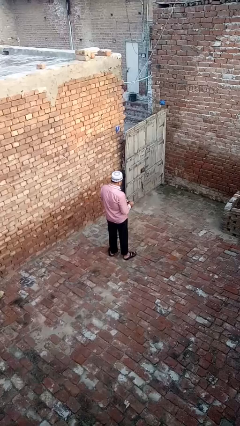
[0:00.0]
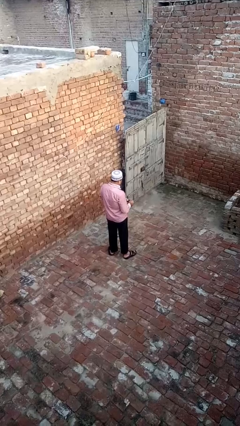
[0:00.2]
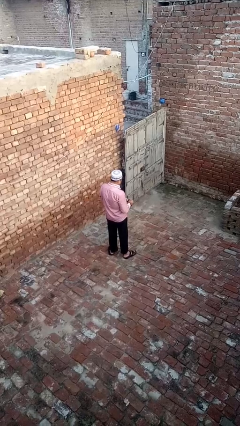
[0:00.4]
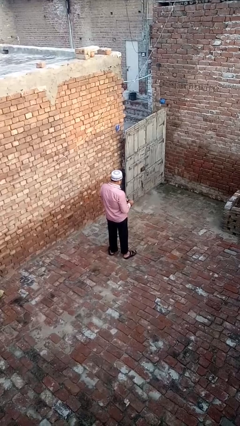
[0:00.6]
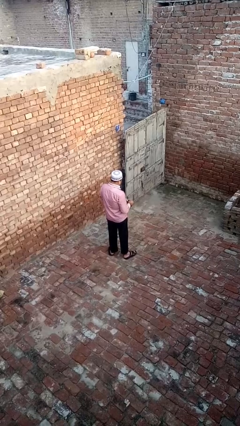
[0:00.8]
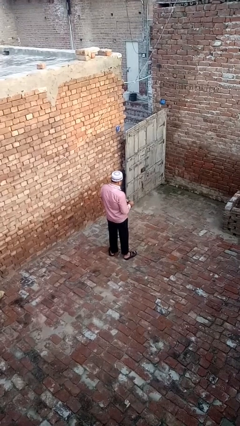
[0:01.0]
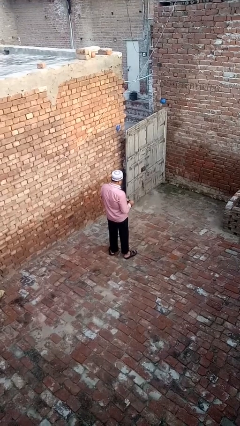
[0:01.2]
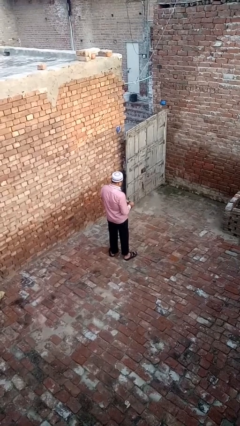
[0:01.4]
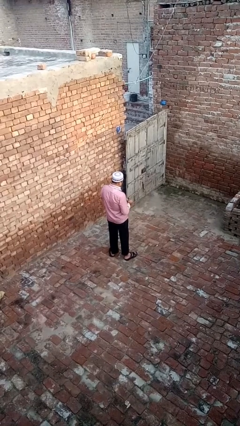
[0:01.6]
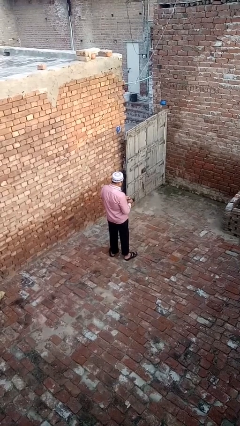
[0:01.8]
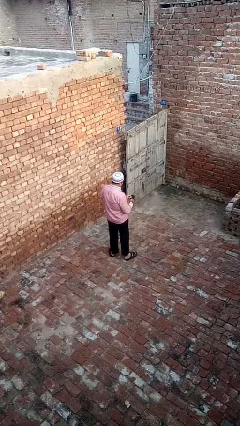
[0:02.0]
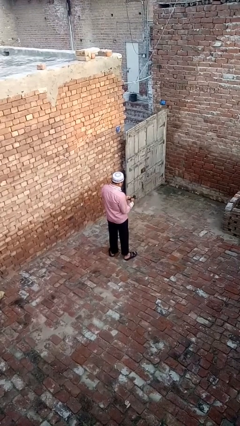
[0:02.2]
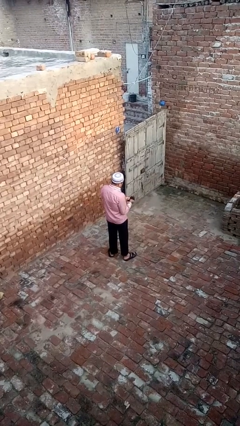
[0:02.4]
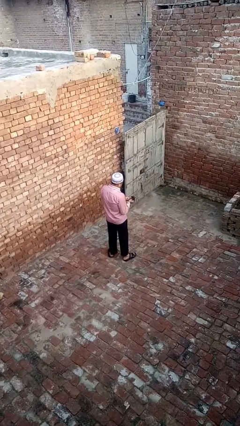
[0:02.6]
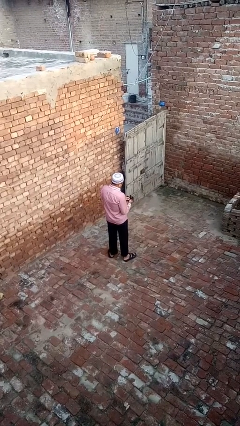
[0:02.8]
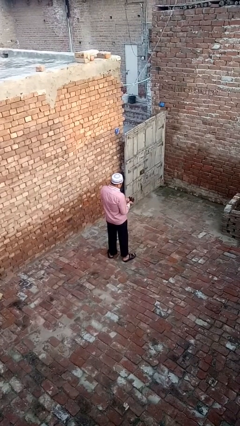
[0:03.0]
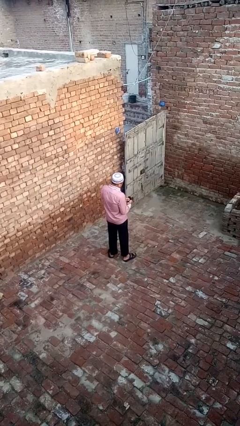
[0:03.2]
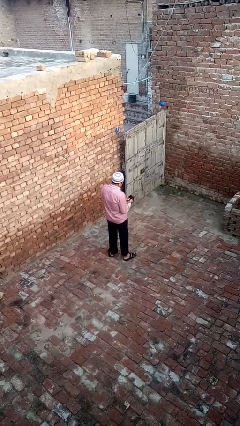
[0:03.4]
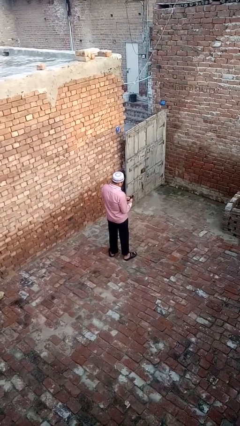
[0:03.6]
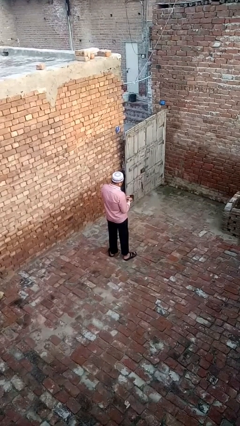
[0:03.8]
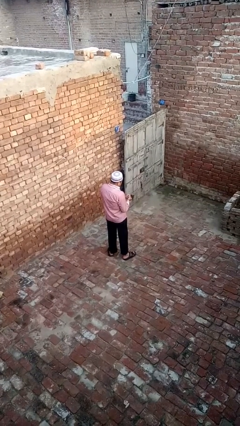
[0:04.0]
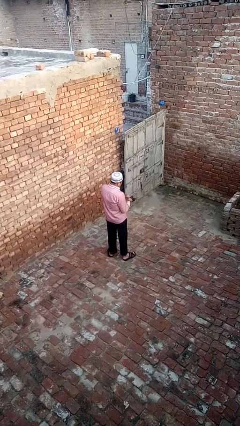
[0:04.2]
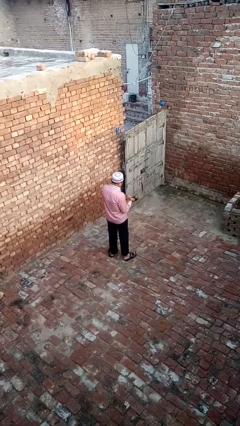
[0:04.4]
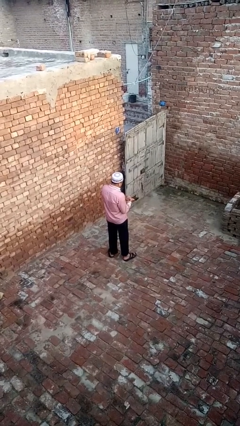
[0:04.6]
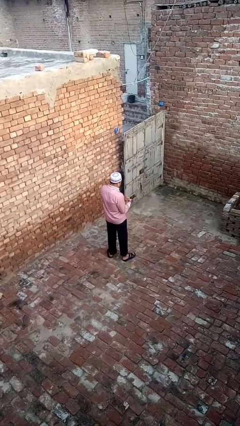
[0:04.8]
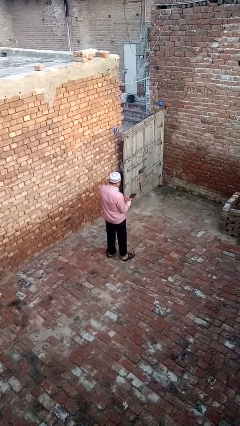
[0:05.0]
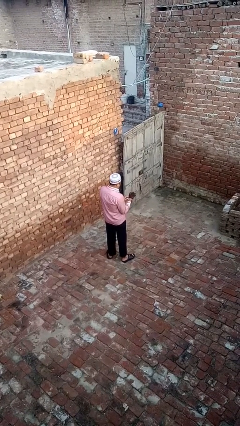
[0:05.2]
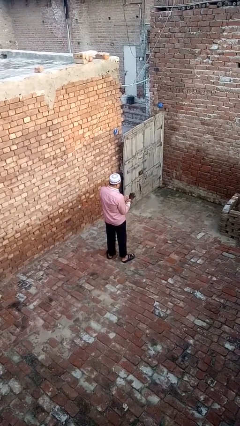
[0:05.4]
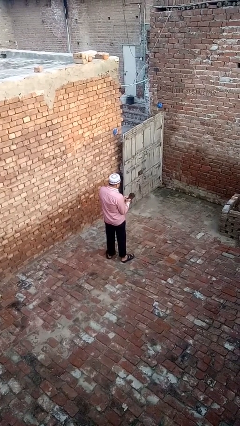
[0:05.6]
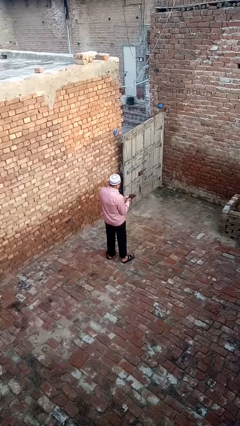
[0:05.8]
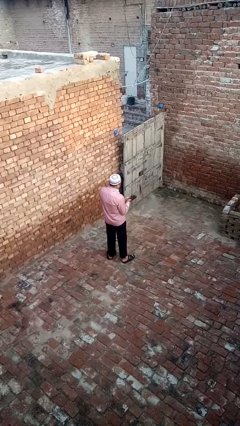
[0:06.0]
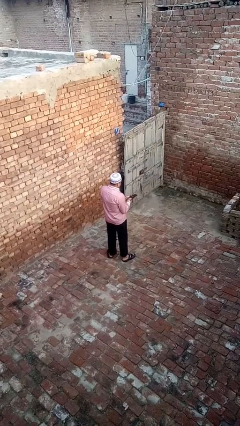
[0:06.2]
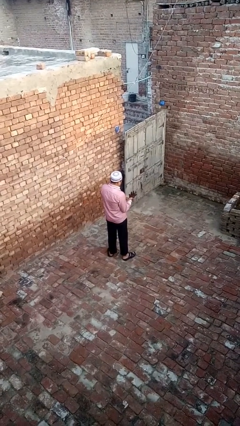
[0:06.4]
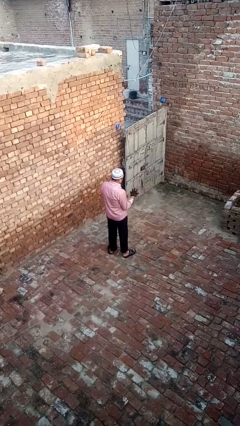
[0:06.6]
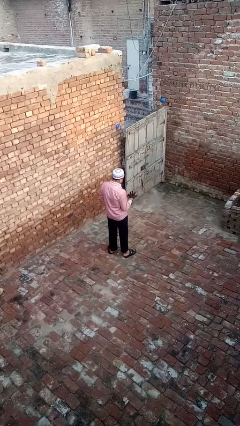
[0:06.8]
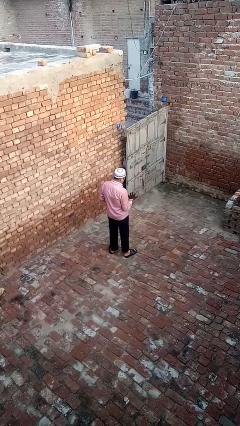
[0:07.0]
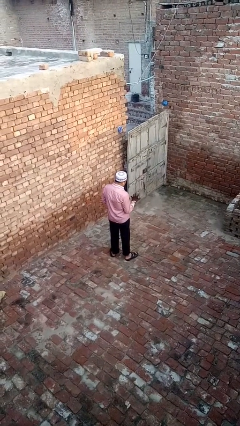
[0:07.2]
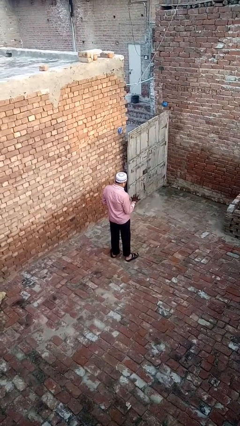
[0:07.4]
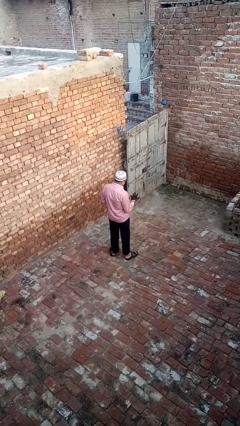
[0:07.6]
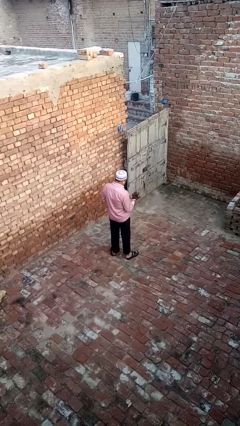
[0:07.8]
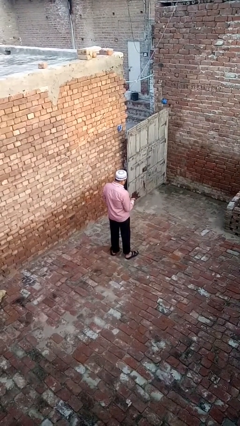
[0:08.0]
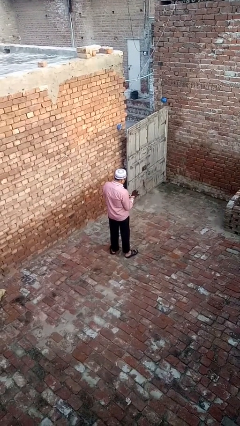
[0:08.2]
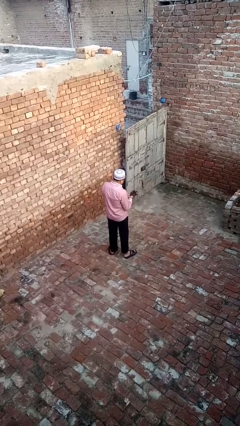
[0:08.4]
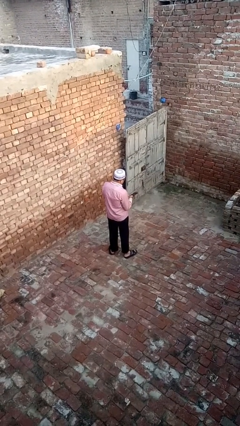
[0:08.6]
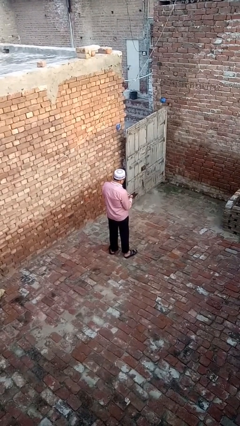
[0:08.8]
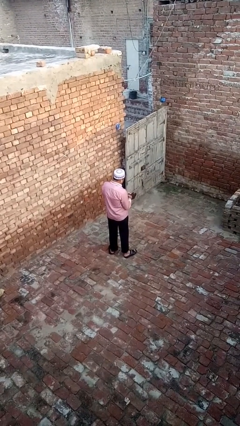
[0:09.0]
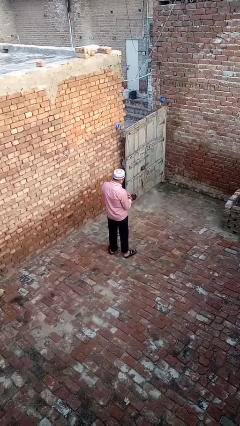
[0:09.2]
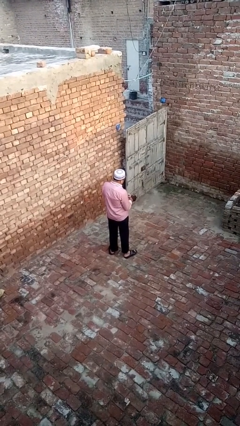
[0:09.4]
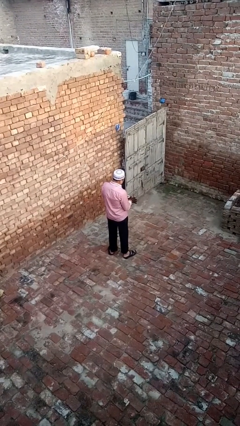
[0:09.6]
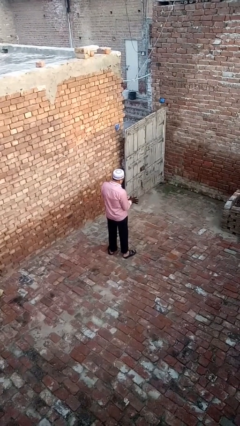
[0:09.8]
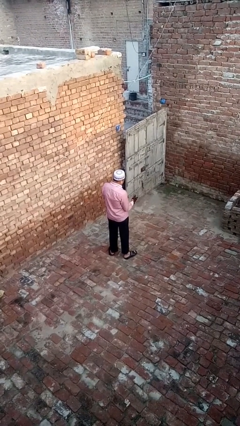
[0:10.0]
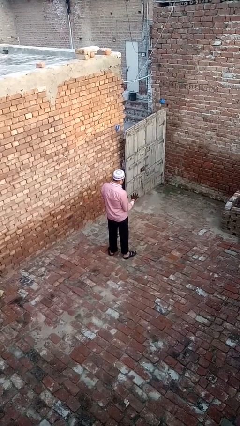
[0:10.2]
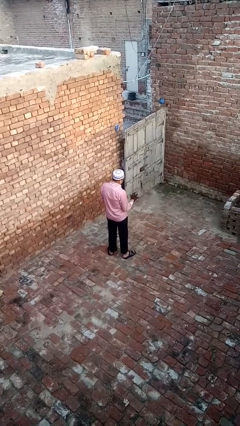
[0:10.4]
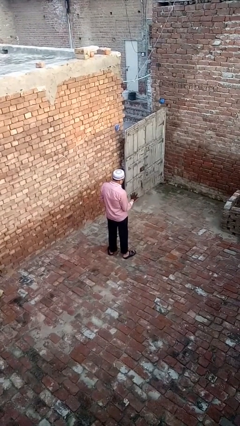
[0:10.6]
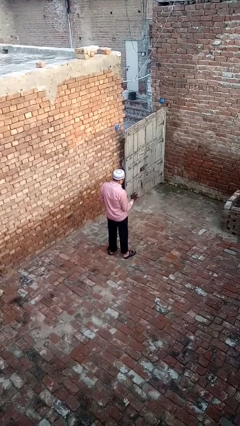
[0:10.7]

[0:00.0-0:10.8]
person puts on gloves

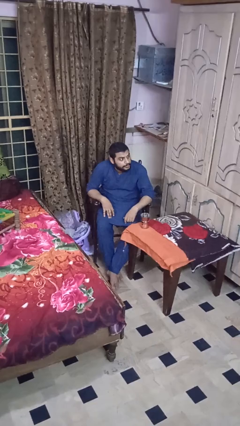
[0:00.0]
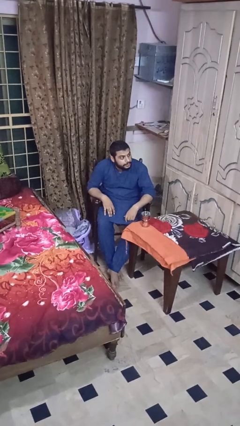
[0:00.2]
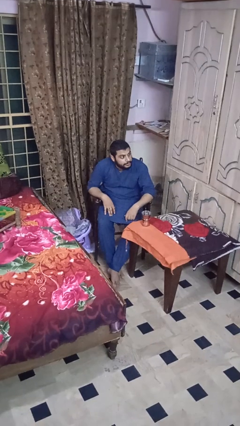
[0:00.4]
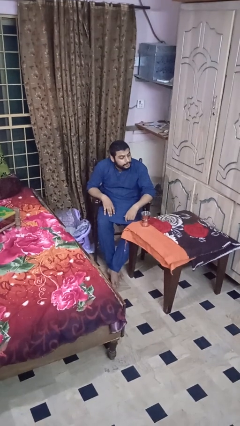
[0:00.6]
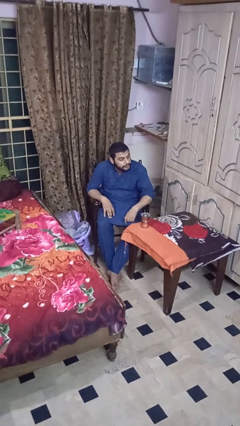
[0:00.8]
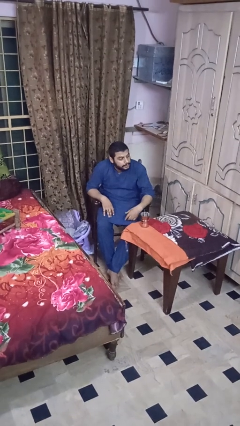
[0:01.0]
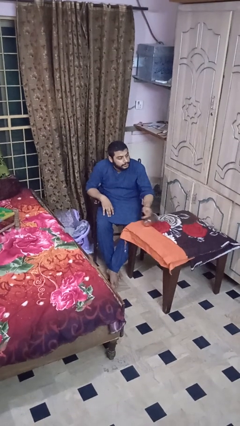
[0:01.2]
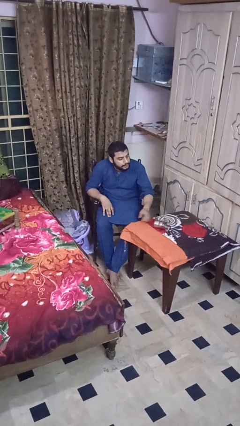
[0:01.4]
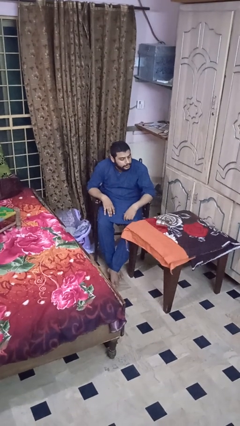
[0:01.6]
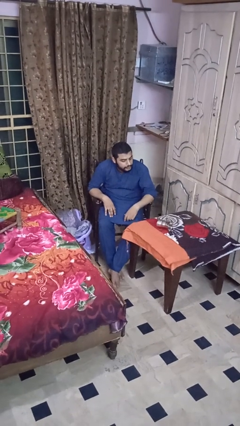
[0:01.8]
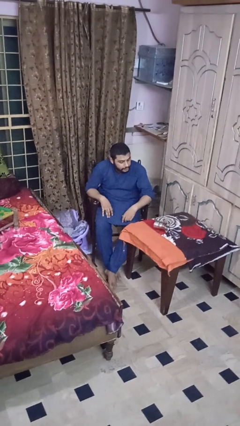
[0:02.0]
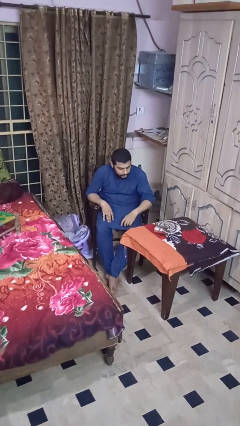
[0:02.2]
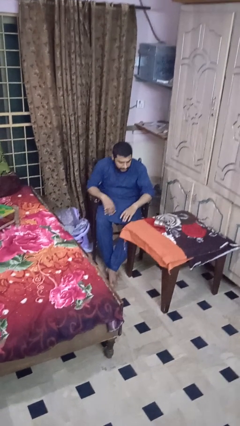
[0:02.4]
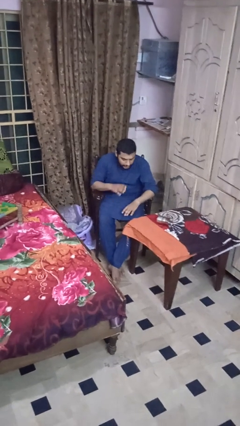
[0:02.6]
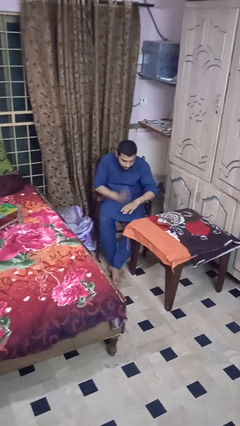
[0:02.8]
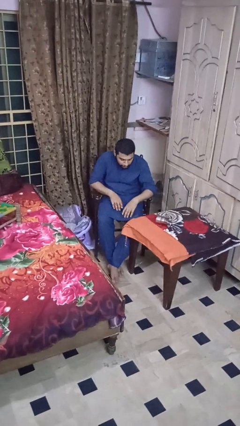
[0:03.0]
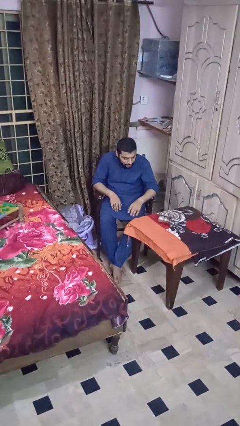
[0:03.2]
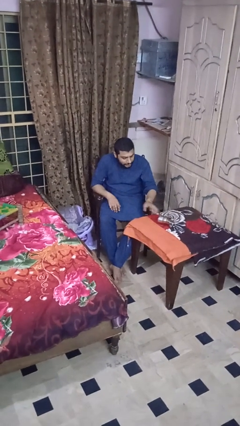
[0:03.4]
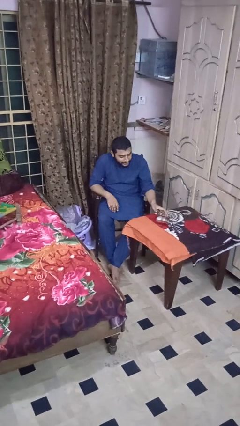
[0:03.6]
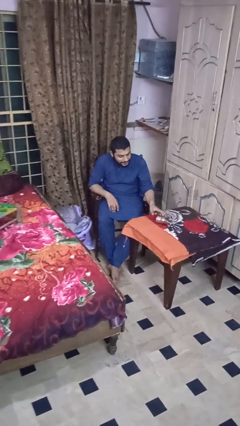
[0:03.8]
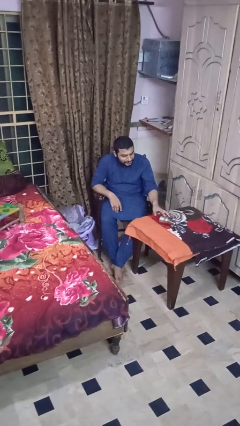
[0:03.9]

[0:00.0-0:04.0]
person knocks over glass

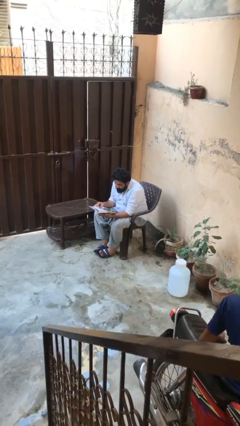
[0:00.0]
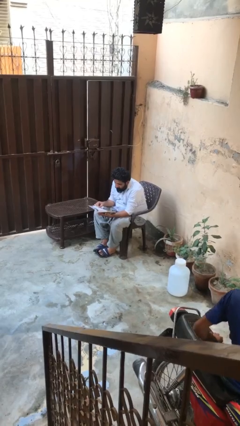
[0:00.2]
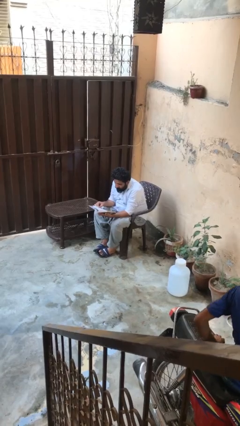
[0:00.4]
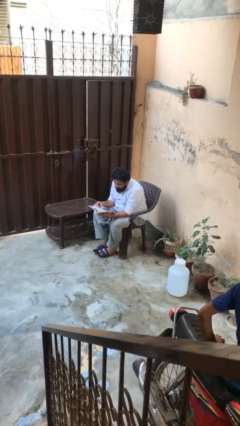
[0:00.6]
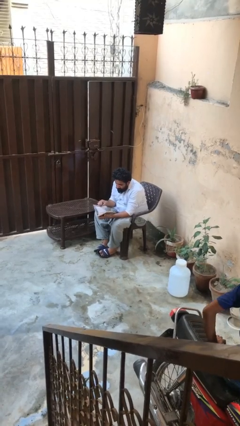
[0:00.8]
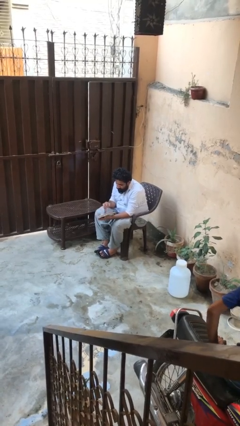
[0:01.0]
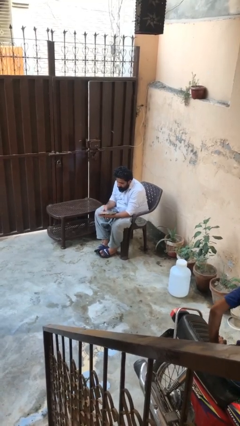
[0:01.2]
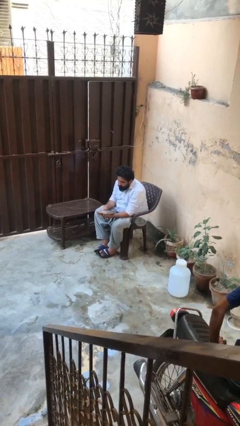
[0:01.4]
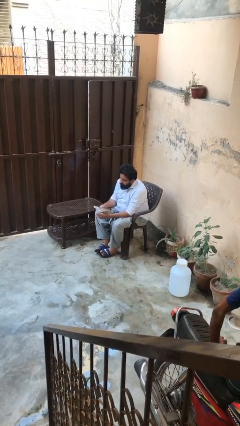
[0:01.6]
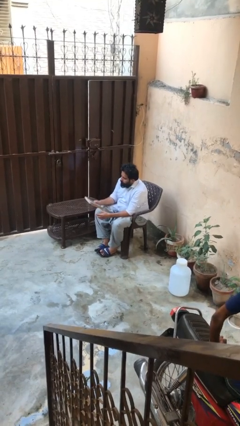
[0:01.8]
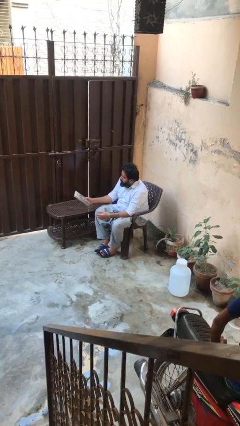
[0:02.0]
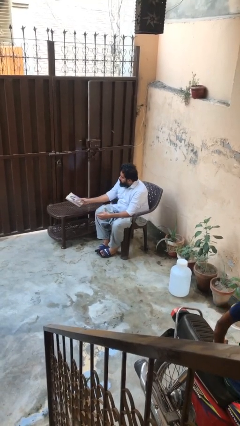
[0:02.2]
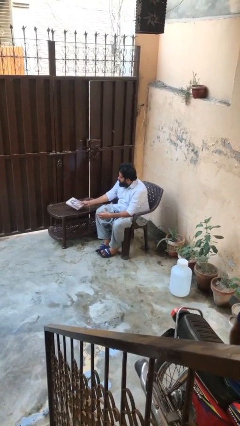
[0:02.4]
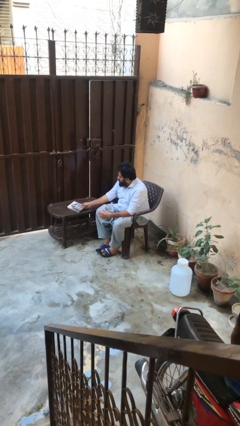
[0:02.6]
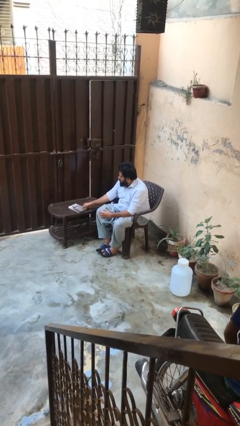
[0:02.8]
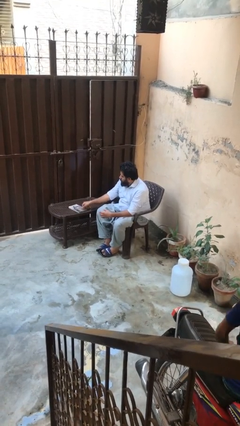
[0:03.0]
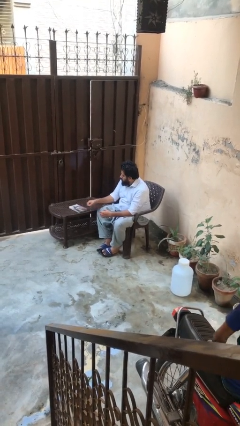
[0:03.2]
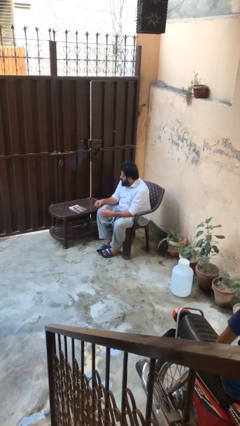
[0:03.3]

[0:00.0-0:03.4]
person puts down object on table
